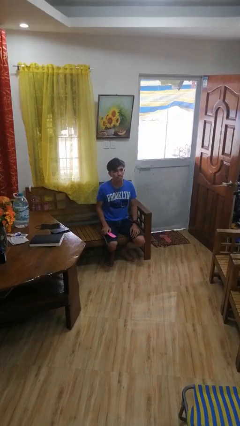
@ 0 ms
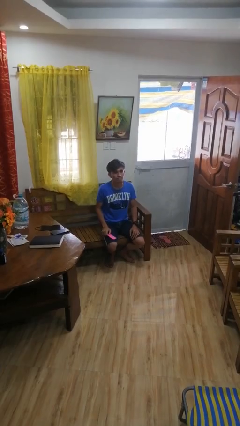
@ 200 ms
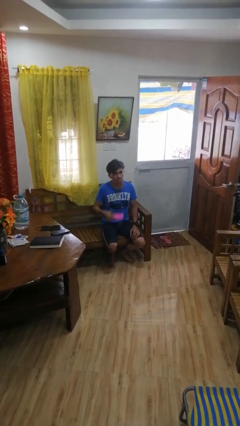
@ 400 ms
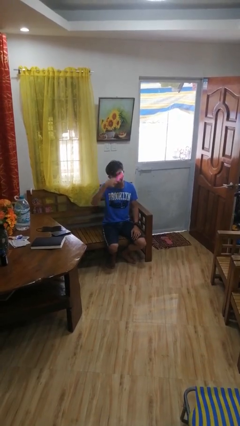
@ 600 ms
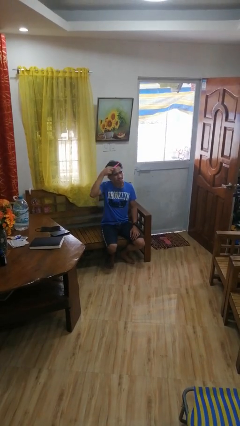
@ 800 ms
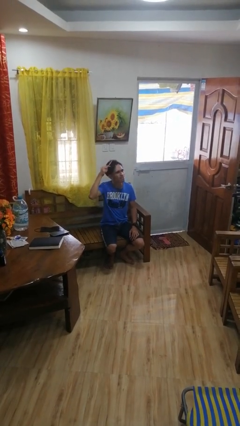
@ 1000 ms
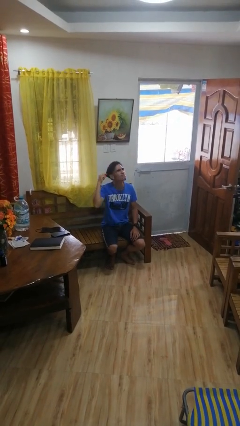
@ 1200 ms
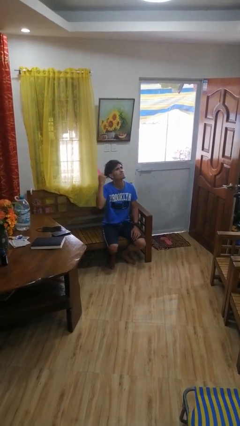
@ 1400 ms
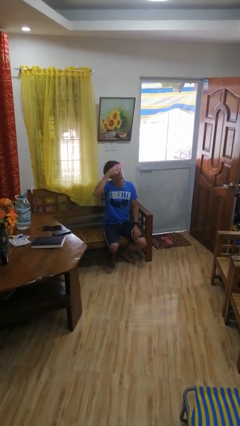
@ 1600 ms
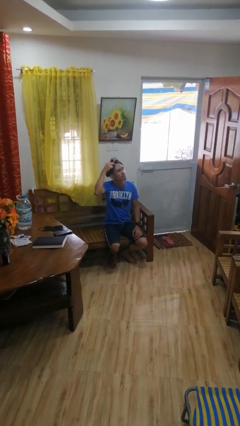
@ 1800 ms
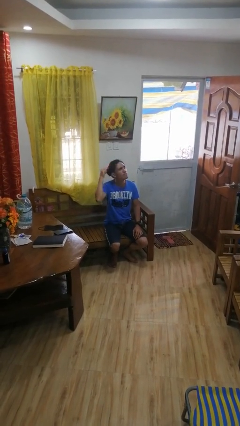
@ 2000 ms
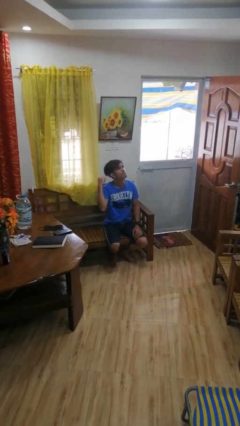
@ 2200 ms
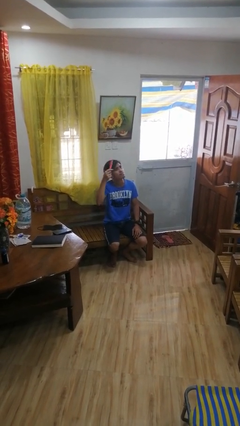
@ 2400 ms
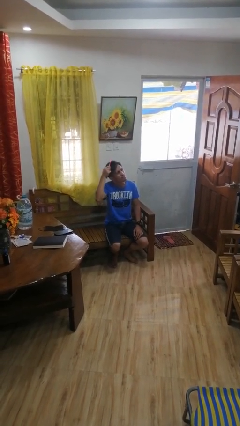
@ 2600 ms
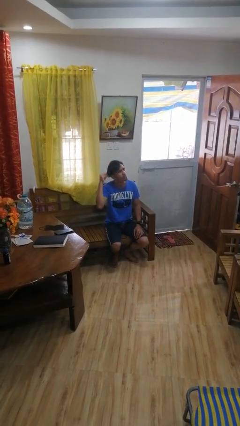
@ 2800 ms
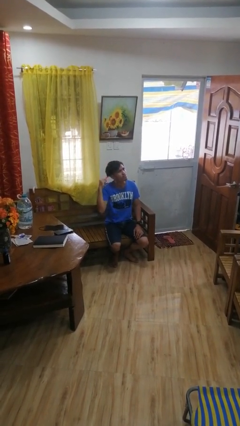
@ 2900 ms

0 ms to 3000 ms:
person brushes hair

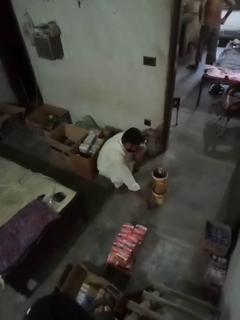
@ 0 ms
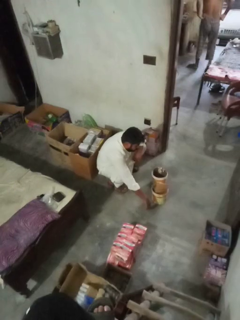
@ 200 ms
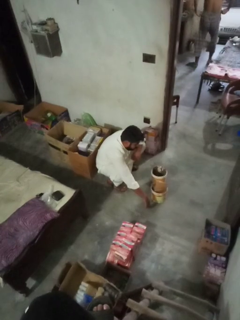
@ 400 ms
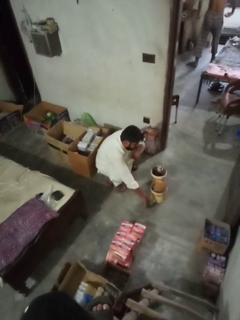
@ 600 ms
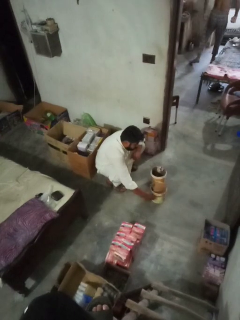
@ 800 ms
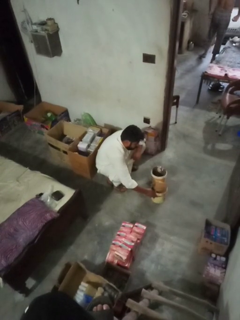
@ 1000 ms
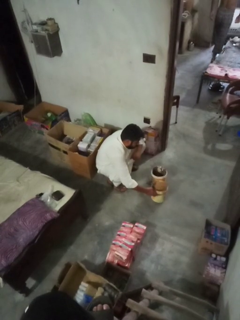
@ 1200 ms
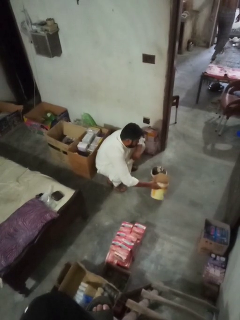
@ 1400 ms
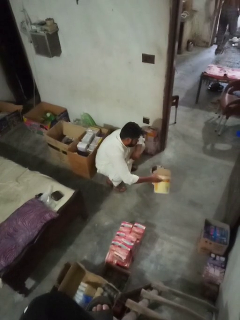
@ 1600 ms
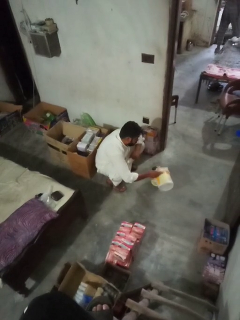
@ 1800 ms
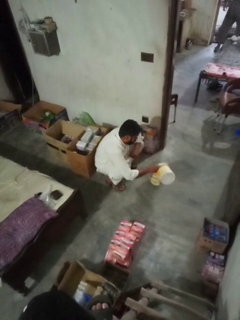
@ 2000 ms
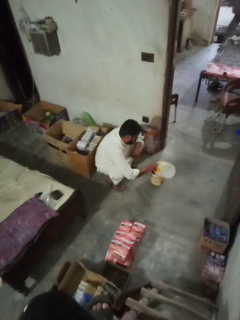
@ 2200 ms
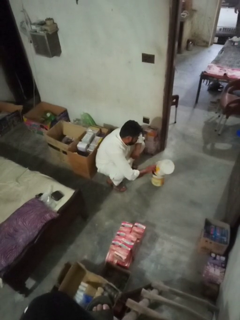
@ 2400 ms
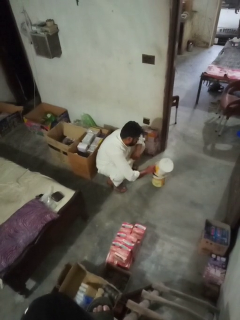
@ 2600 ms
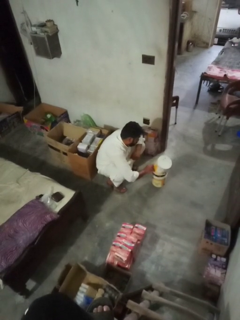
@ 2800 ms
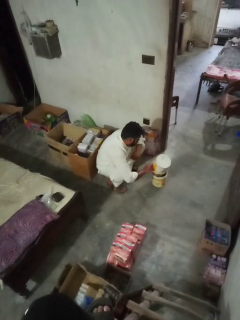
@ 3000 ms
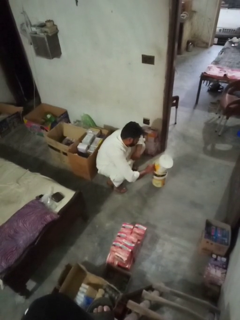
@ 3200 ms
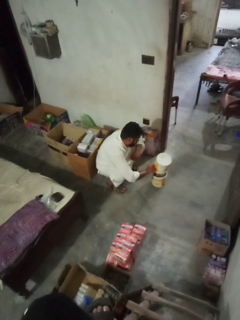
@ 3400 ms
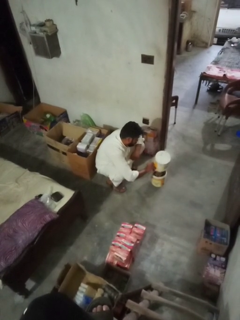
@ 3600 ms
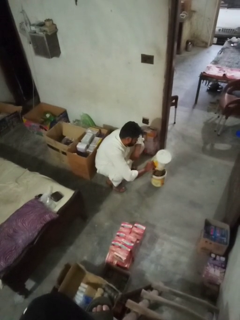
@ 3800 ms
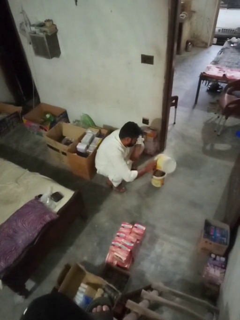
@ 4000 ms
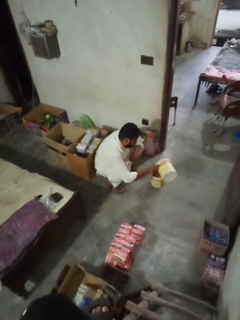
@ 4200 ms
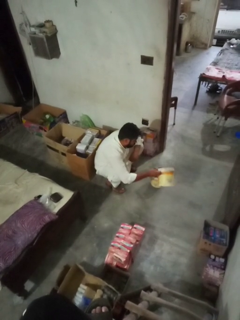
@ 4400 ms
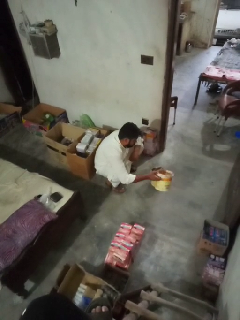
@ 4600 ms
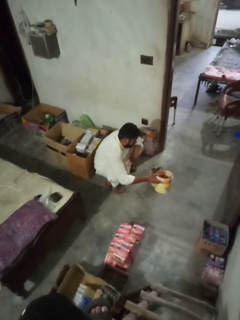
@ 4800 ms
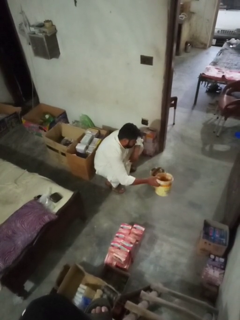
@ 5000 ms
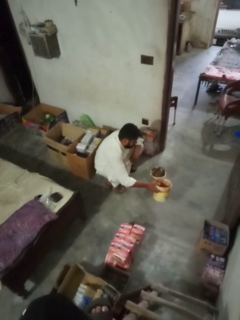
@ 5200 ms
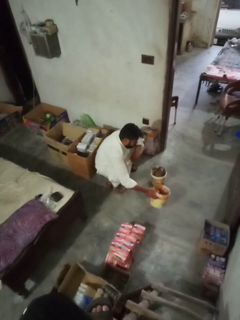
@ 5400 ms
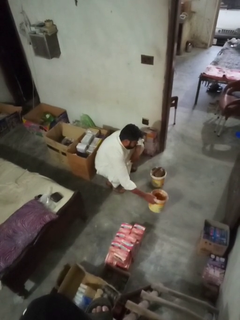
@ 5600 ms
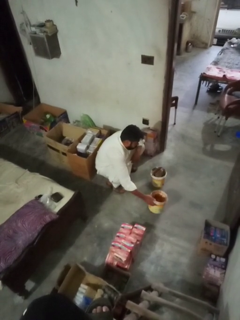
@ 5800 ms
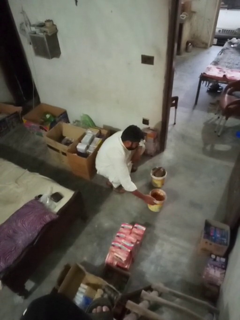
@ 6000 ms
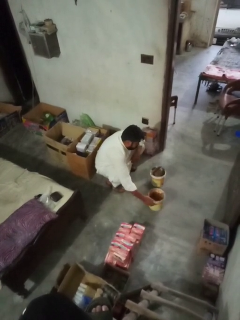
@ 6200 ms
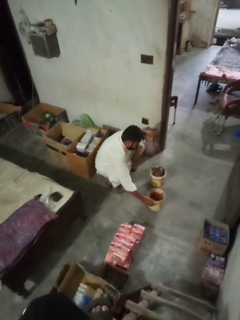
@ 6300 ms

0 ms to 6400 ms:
person removes trashbag from trashcan

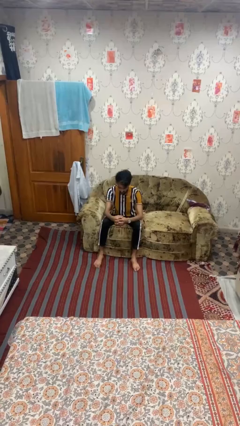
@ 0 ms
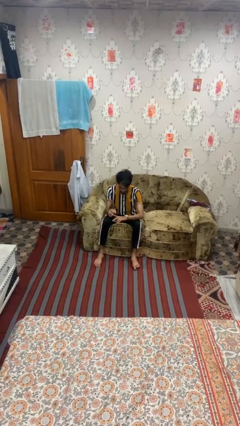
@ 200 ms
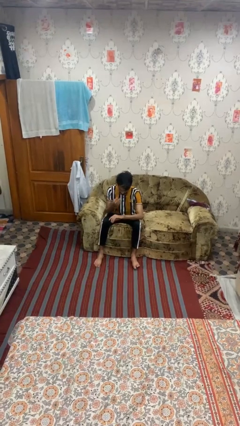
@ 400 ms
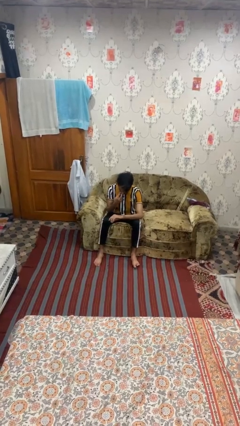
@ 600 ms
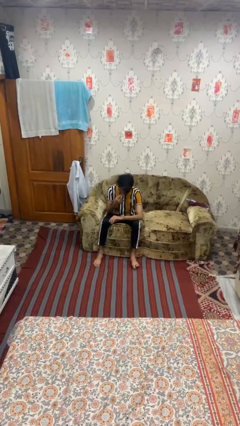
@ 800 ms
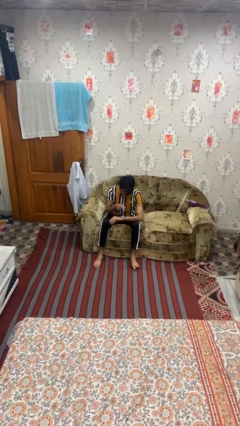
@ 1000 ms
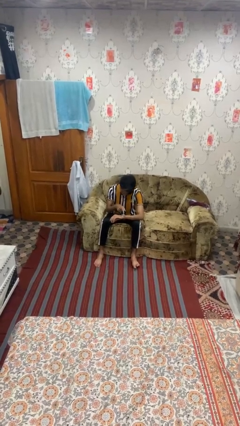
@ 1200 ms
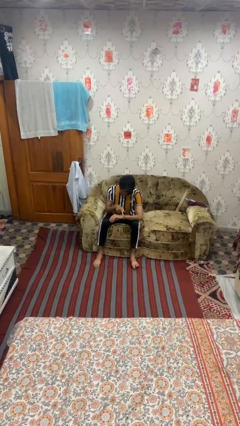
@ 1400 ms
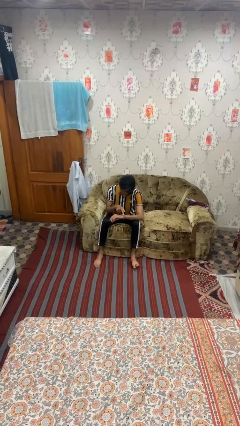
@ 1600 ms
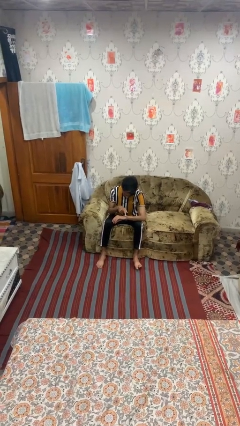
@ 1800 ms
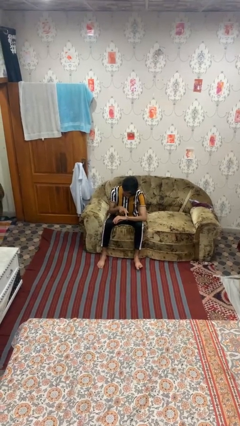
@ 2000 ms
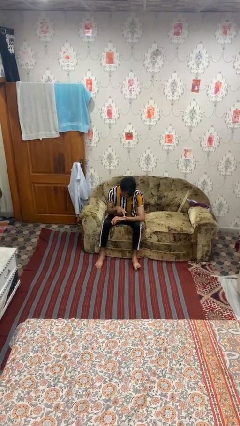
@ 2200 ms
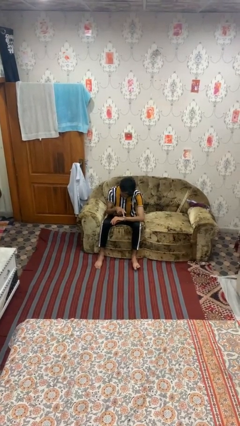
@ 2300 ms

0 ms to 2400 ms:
person gestures watch closely

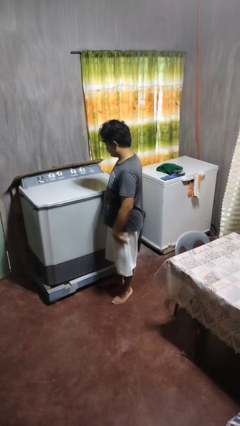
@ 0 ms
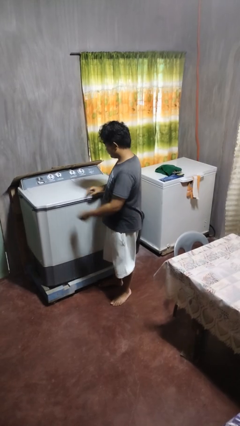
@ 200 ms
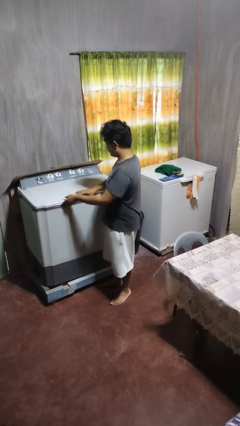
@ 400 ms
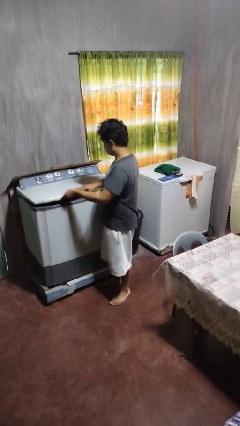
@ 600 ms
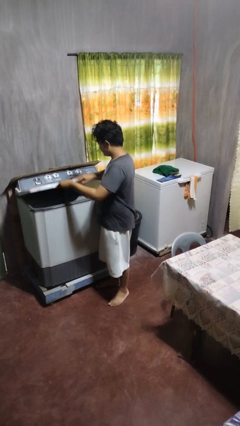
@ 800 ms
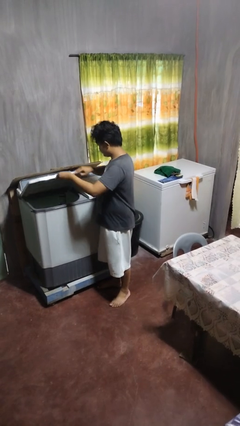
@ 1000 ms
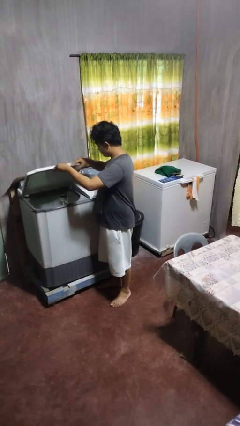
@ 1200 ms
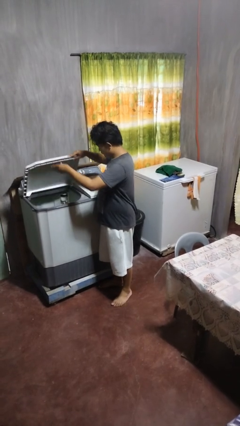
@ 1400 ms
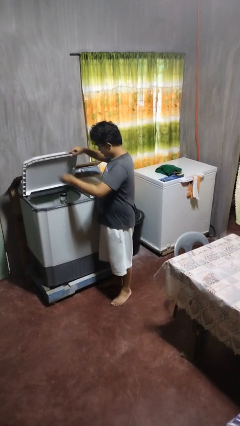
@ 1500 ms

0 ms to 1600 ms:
person opens clothes washer

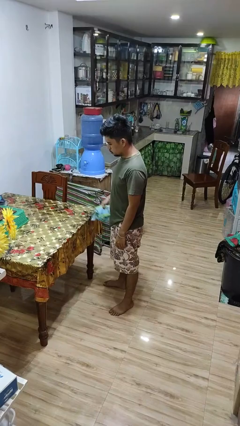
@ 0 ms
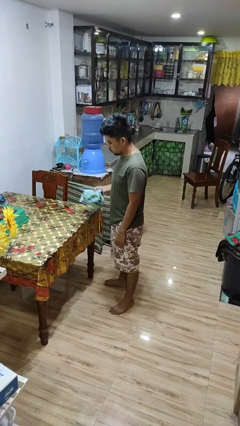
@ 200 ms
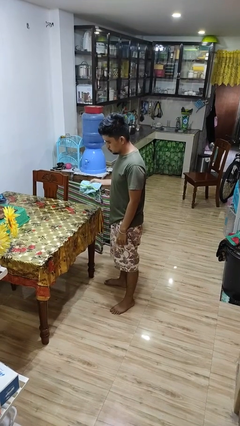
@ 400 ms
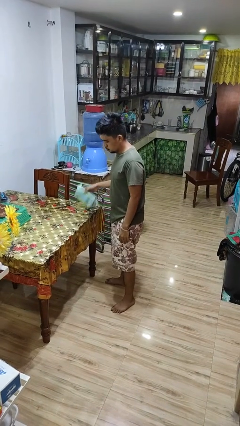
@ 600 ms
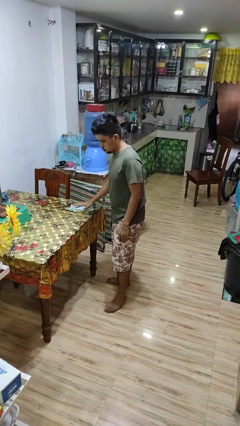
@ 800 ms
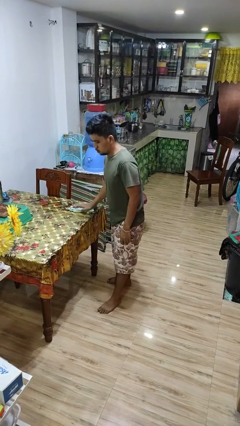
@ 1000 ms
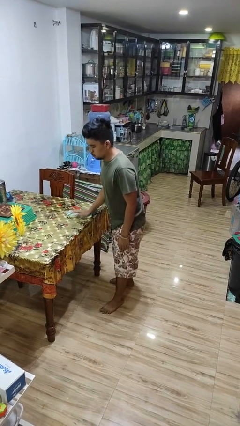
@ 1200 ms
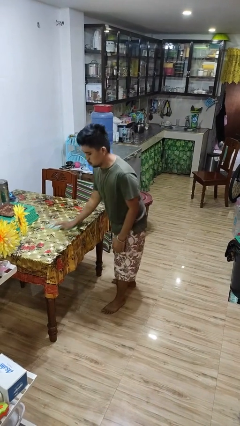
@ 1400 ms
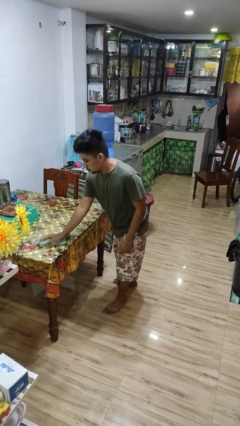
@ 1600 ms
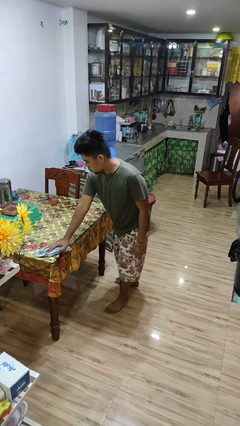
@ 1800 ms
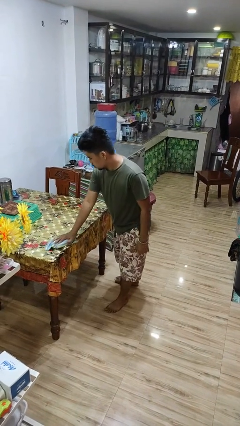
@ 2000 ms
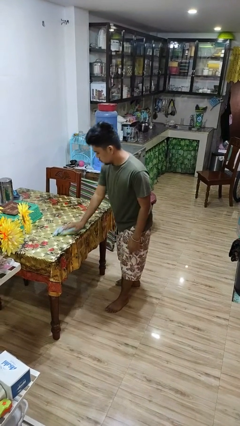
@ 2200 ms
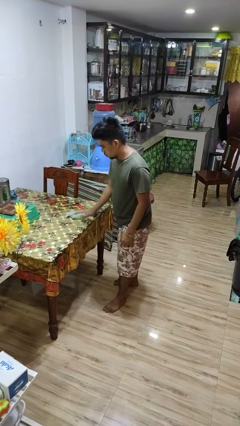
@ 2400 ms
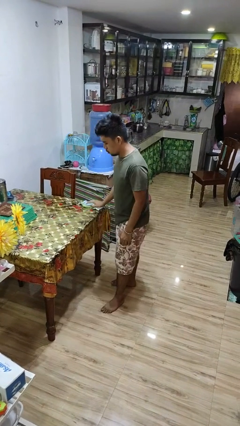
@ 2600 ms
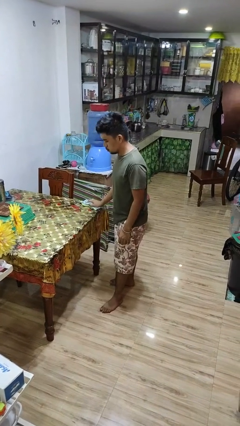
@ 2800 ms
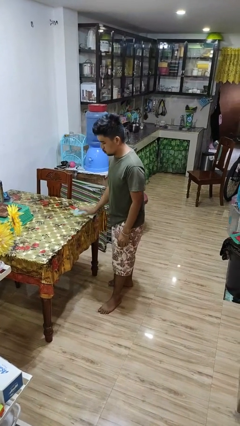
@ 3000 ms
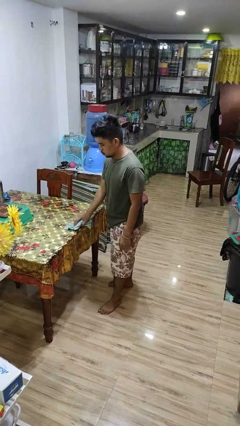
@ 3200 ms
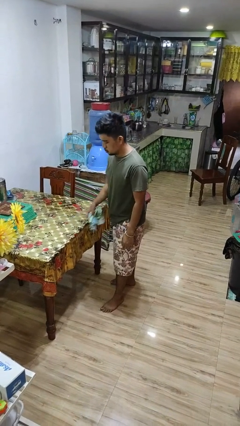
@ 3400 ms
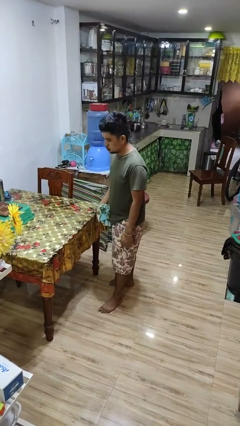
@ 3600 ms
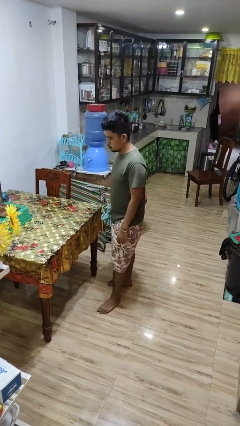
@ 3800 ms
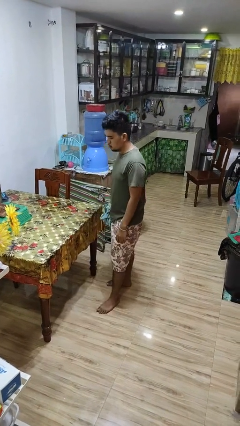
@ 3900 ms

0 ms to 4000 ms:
person cleans table with rag

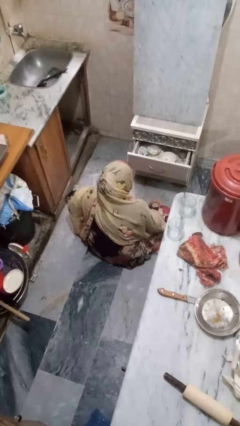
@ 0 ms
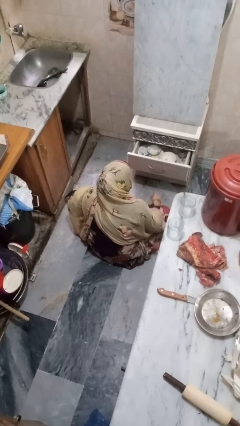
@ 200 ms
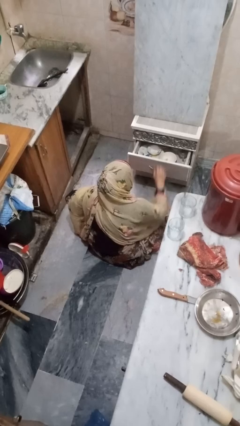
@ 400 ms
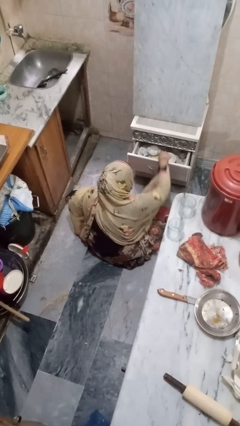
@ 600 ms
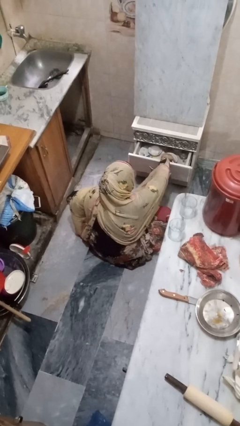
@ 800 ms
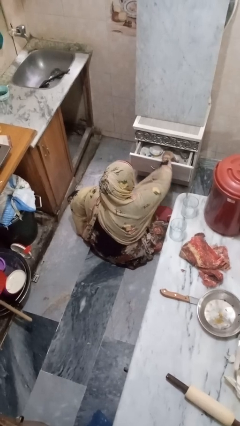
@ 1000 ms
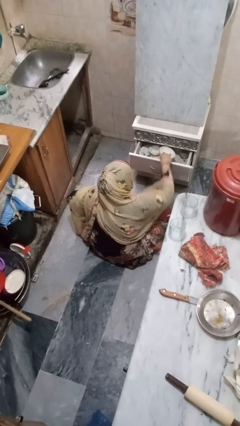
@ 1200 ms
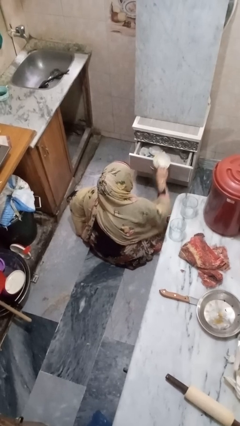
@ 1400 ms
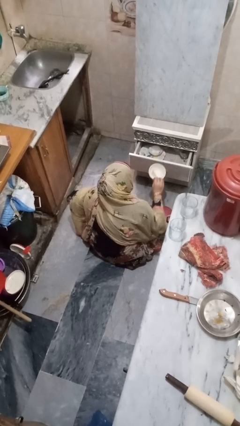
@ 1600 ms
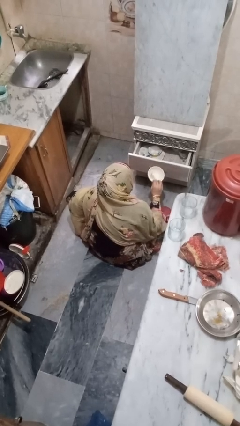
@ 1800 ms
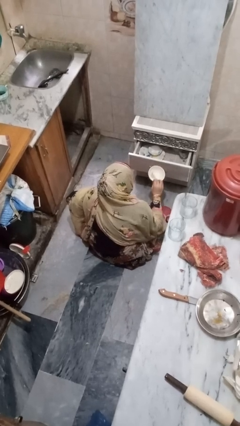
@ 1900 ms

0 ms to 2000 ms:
person takes object from kitchen drawer
